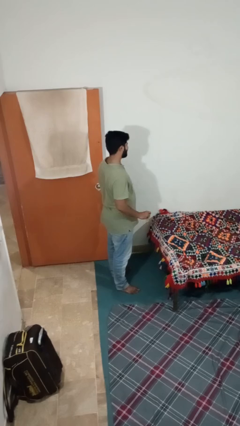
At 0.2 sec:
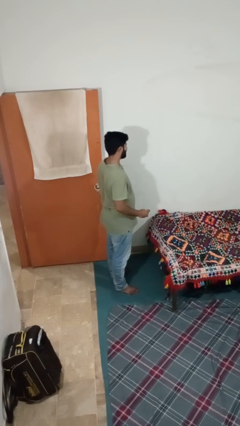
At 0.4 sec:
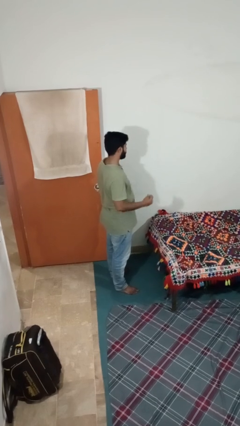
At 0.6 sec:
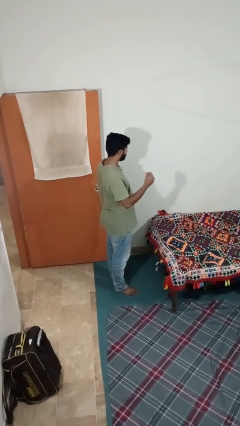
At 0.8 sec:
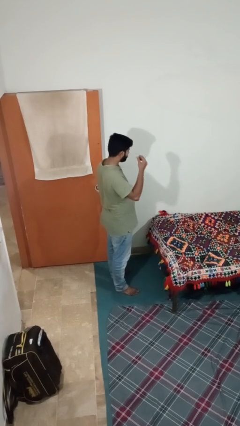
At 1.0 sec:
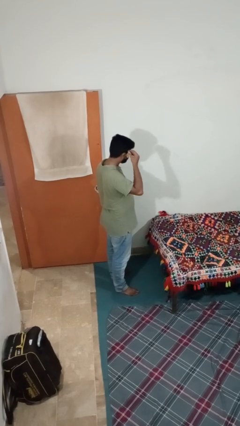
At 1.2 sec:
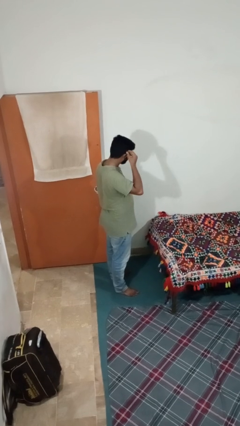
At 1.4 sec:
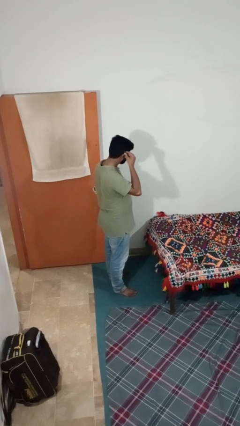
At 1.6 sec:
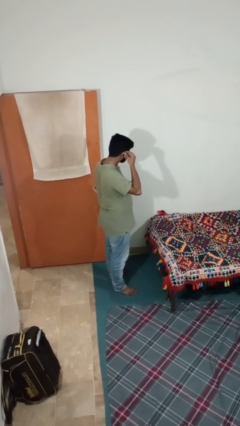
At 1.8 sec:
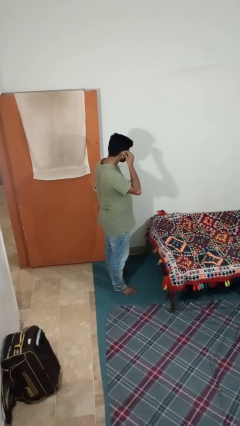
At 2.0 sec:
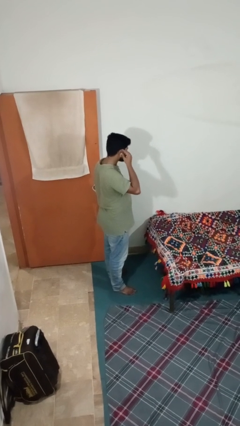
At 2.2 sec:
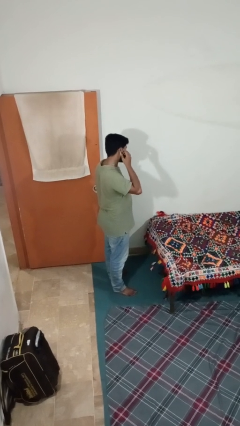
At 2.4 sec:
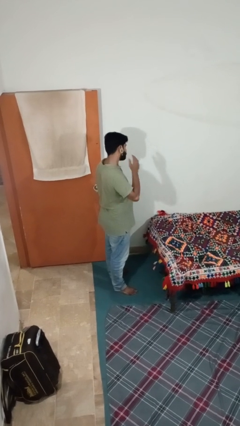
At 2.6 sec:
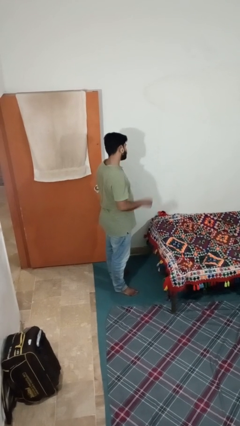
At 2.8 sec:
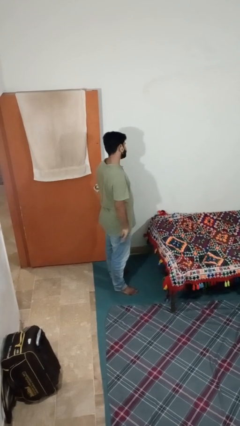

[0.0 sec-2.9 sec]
person puts on earrings

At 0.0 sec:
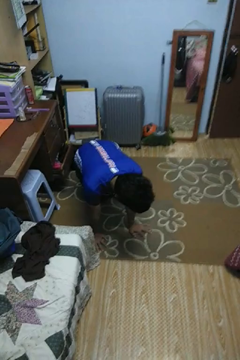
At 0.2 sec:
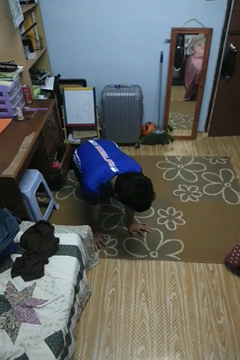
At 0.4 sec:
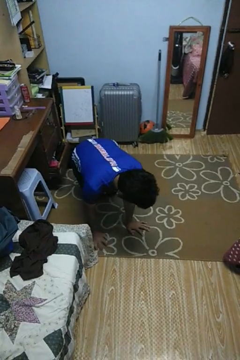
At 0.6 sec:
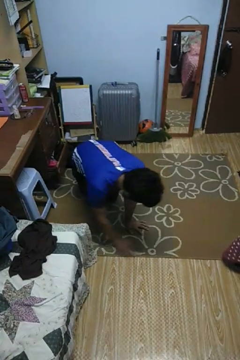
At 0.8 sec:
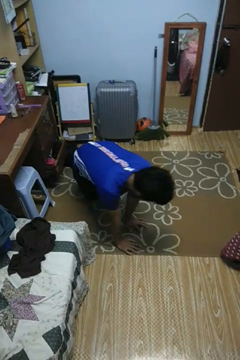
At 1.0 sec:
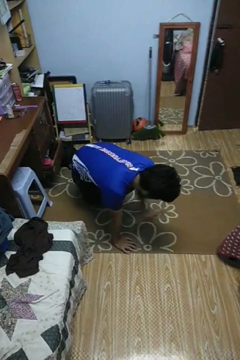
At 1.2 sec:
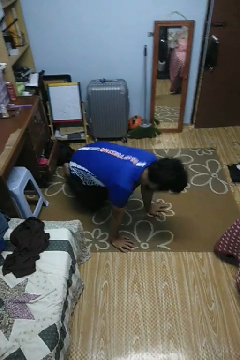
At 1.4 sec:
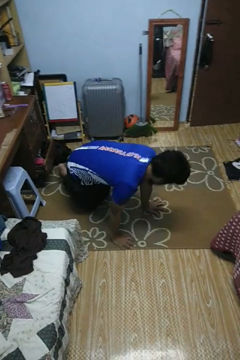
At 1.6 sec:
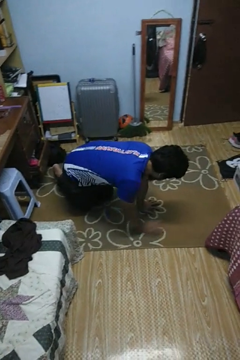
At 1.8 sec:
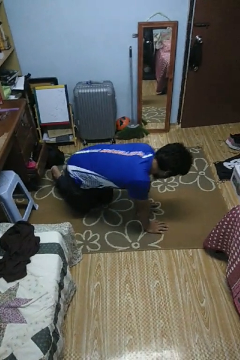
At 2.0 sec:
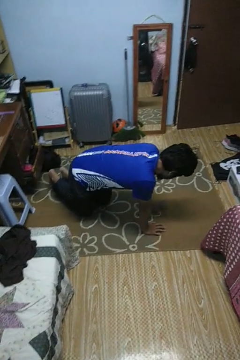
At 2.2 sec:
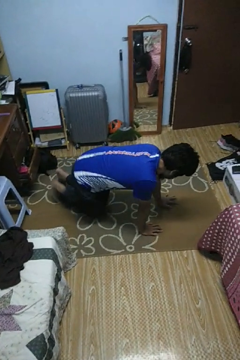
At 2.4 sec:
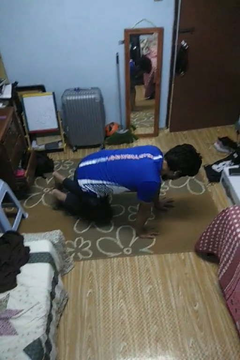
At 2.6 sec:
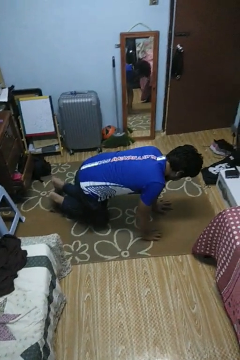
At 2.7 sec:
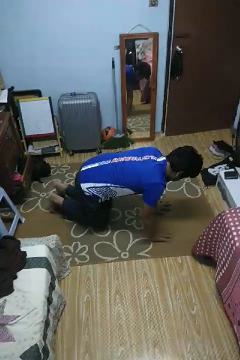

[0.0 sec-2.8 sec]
person crawls

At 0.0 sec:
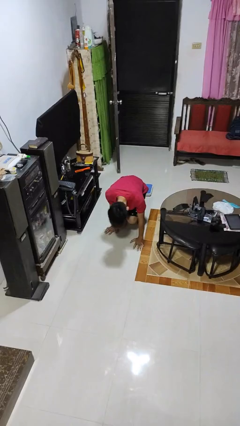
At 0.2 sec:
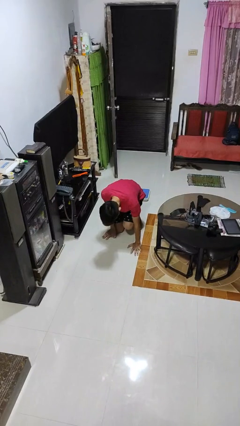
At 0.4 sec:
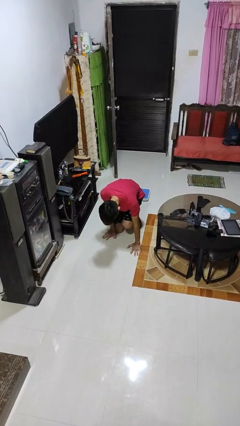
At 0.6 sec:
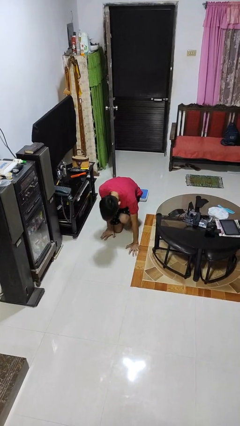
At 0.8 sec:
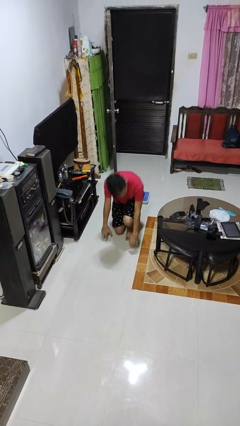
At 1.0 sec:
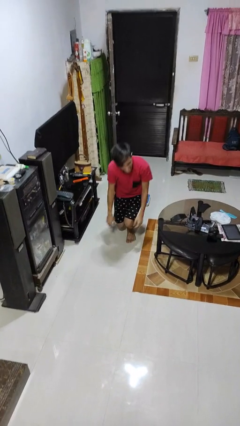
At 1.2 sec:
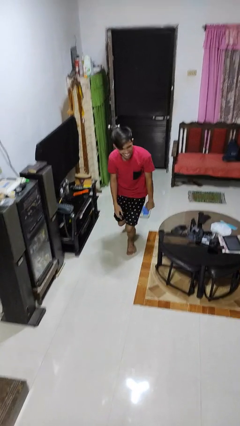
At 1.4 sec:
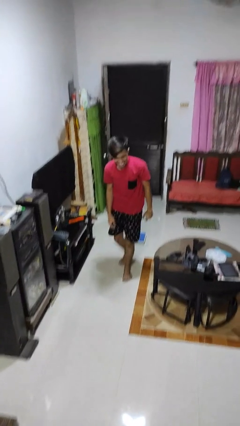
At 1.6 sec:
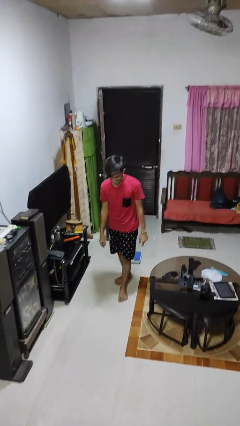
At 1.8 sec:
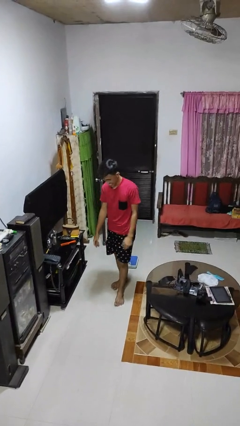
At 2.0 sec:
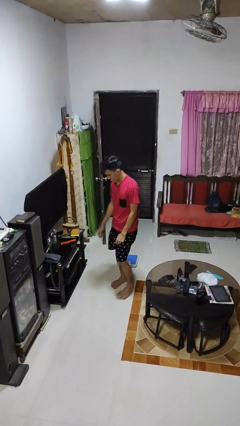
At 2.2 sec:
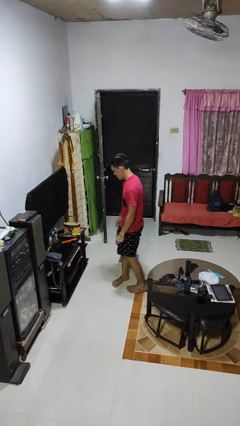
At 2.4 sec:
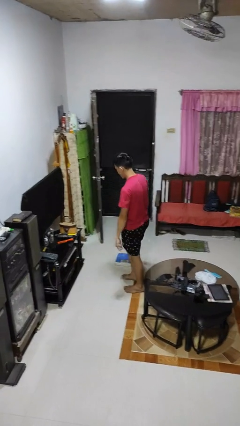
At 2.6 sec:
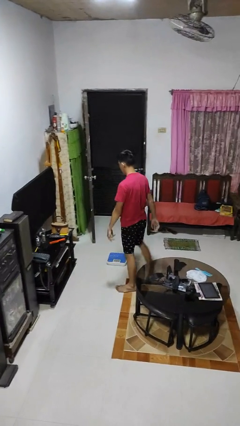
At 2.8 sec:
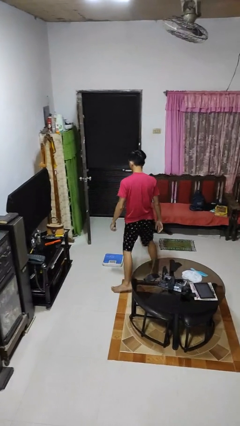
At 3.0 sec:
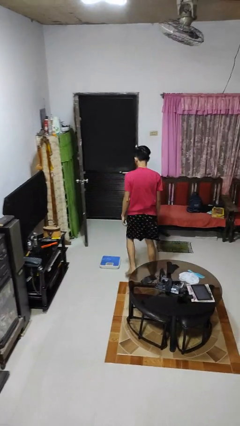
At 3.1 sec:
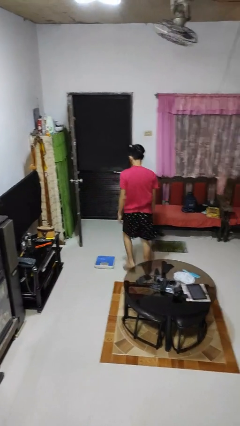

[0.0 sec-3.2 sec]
person stands up from floor

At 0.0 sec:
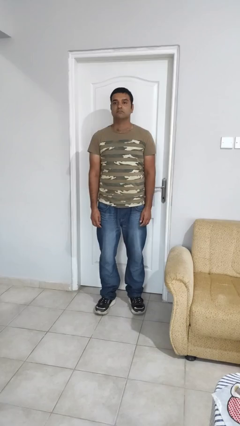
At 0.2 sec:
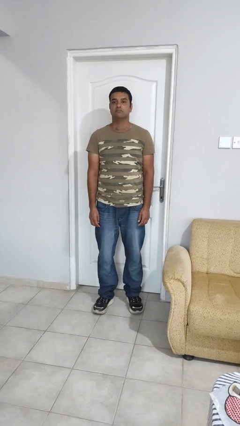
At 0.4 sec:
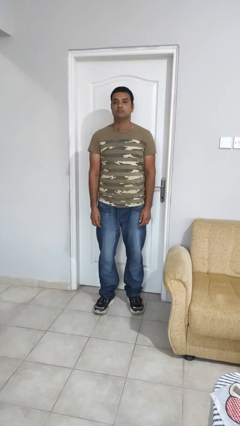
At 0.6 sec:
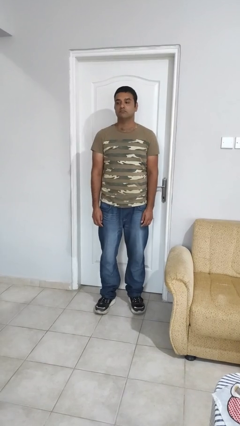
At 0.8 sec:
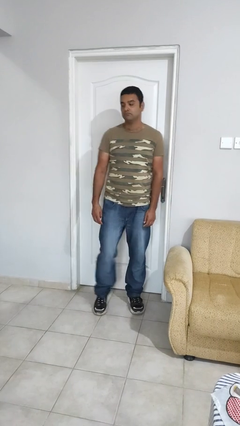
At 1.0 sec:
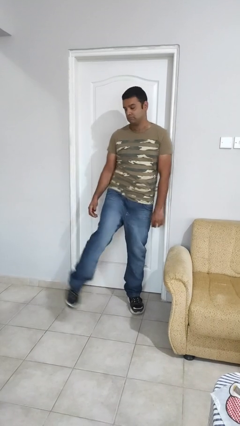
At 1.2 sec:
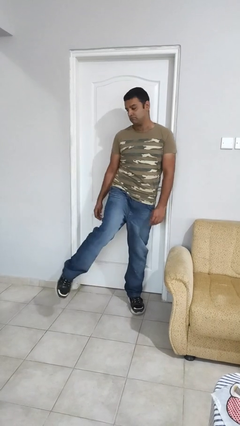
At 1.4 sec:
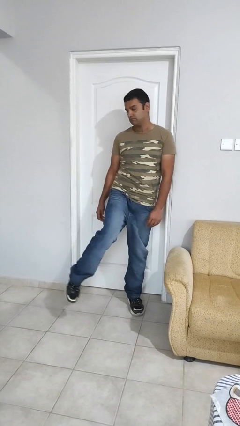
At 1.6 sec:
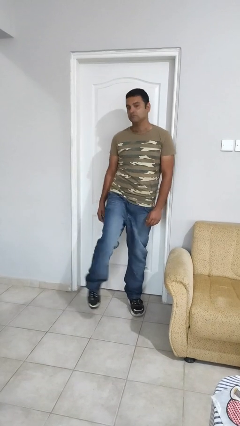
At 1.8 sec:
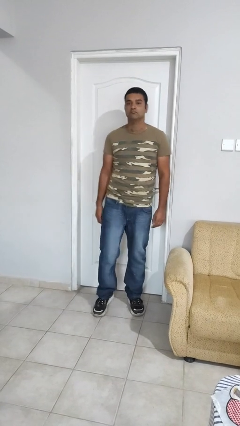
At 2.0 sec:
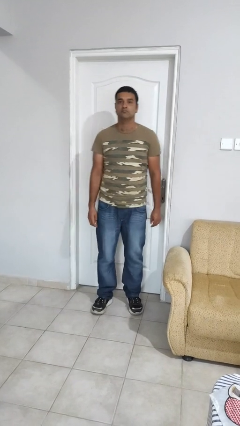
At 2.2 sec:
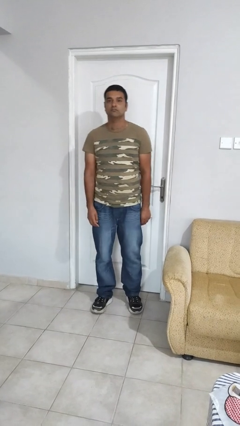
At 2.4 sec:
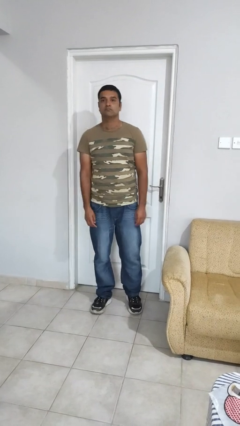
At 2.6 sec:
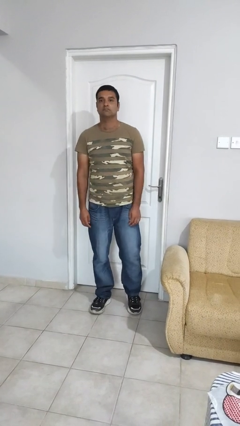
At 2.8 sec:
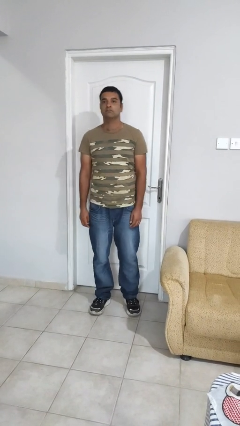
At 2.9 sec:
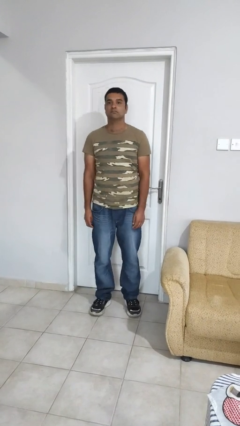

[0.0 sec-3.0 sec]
person karate kicks

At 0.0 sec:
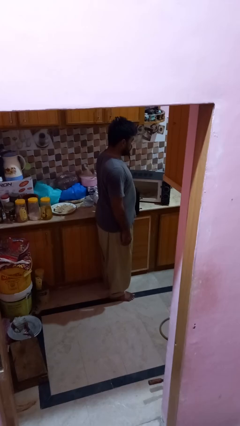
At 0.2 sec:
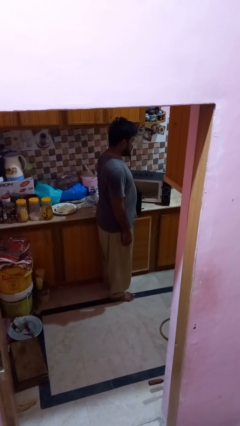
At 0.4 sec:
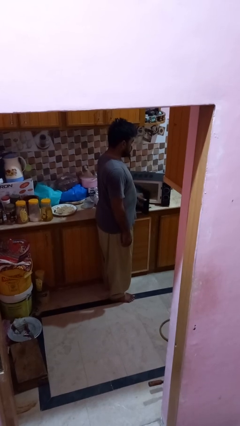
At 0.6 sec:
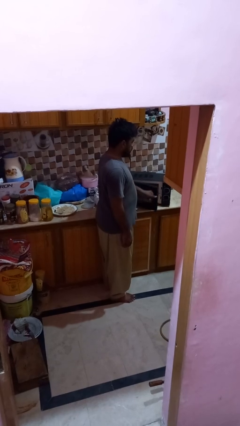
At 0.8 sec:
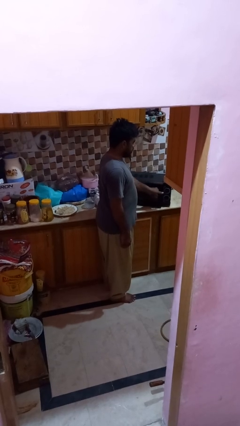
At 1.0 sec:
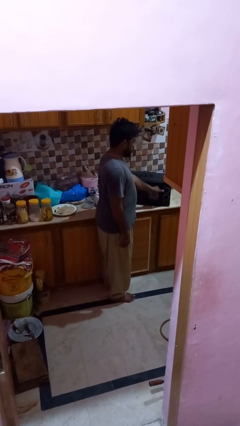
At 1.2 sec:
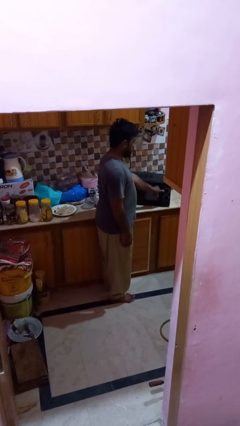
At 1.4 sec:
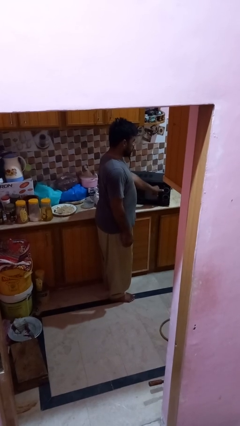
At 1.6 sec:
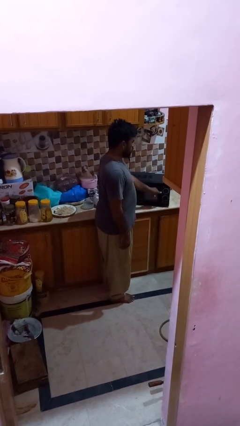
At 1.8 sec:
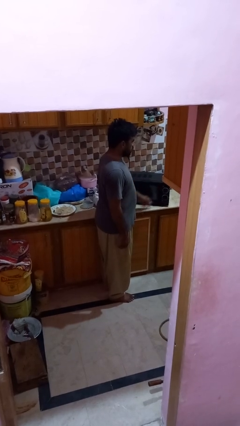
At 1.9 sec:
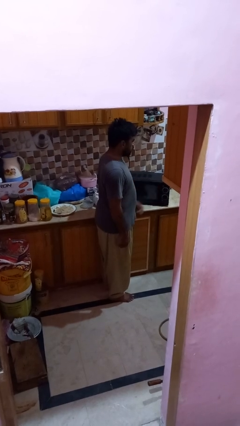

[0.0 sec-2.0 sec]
person closes microwave

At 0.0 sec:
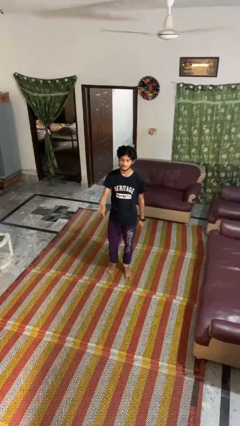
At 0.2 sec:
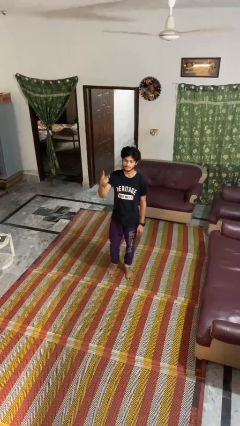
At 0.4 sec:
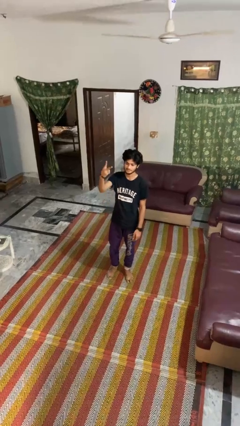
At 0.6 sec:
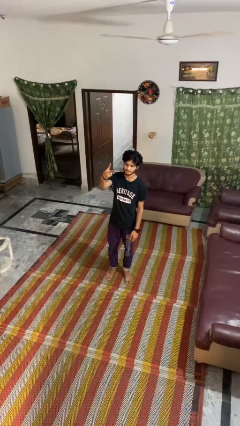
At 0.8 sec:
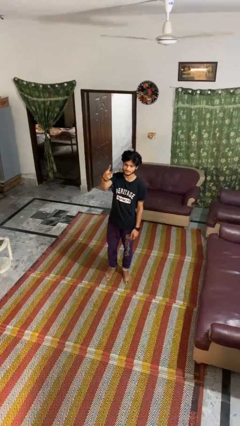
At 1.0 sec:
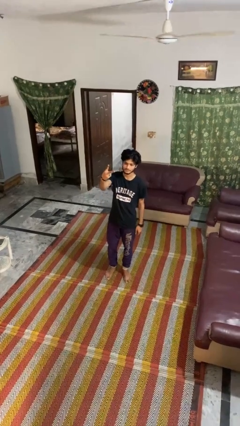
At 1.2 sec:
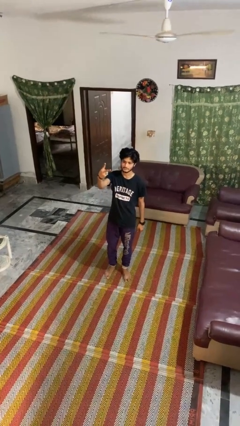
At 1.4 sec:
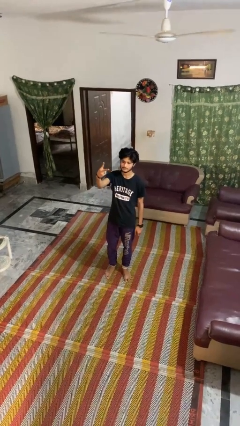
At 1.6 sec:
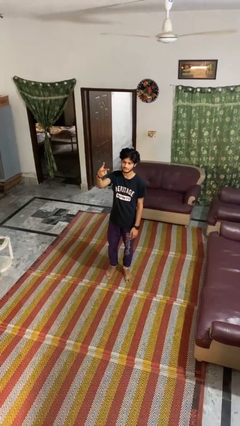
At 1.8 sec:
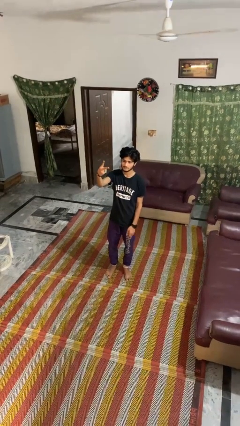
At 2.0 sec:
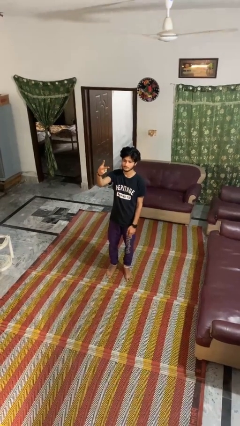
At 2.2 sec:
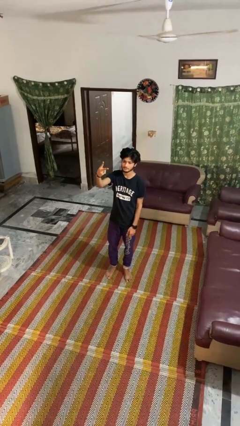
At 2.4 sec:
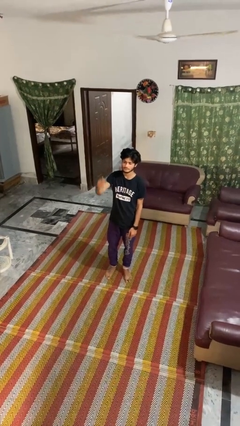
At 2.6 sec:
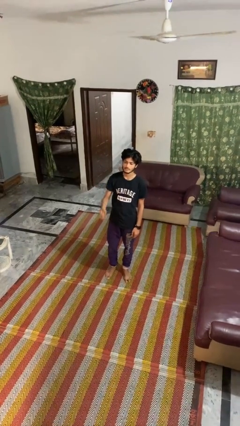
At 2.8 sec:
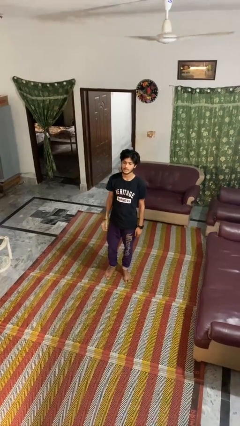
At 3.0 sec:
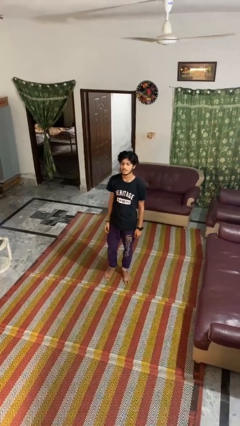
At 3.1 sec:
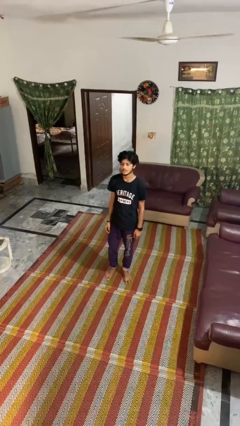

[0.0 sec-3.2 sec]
person gestures peace

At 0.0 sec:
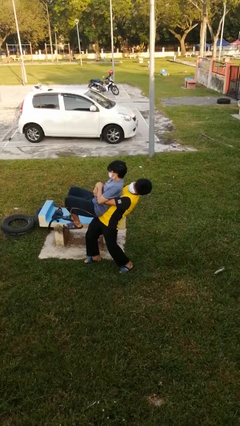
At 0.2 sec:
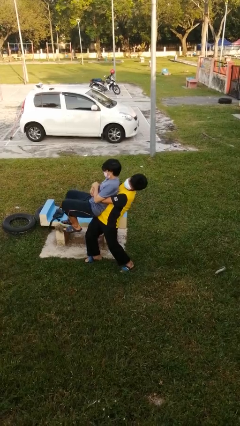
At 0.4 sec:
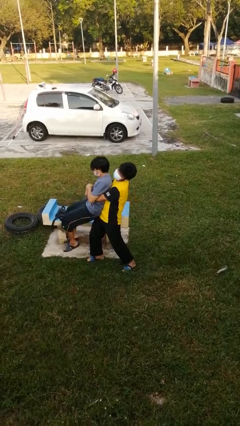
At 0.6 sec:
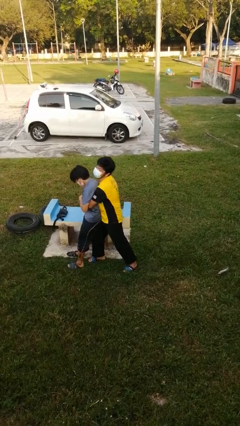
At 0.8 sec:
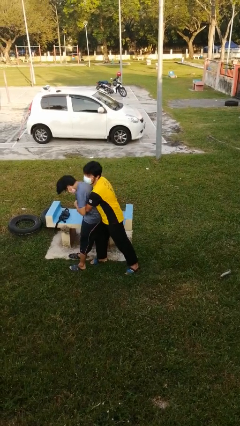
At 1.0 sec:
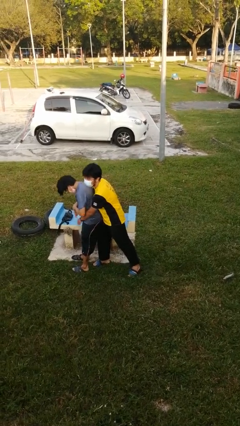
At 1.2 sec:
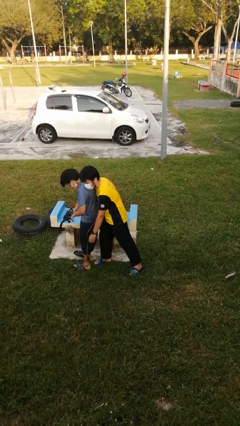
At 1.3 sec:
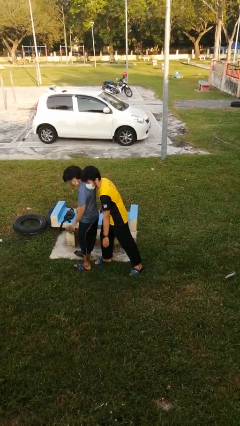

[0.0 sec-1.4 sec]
person puts down person
